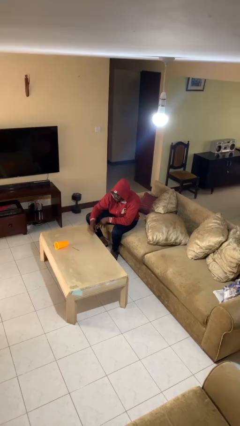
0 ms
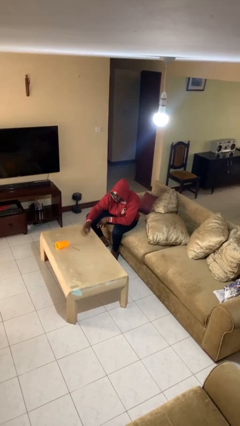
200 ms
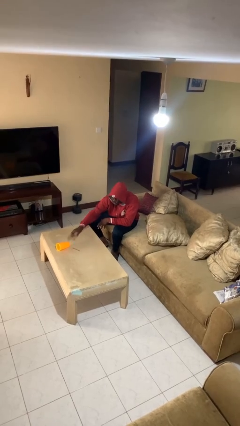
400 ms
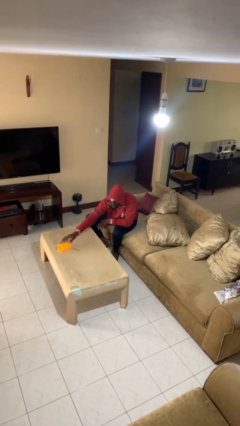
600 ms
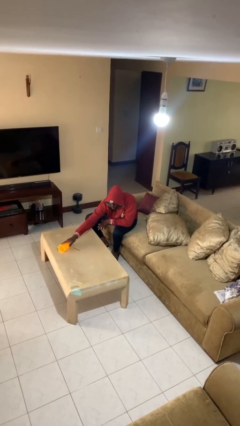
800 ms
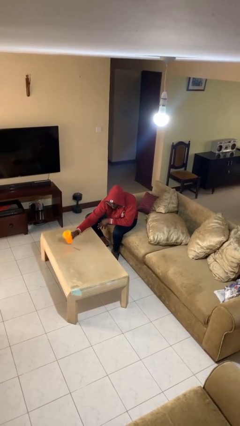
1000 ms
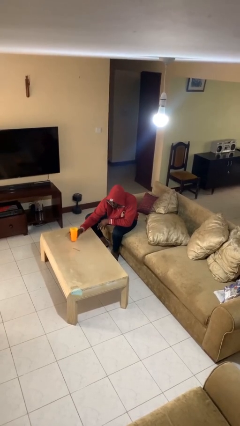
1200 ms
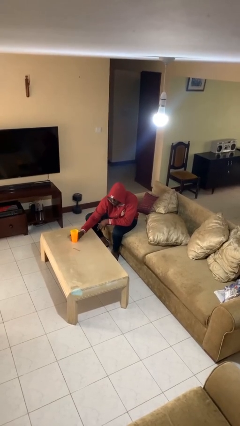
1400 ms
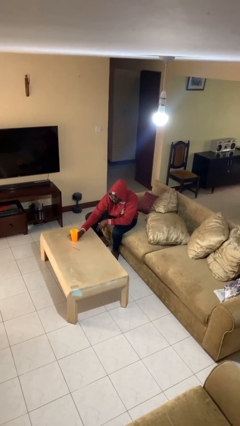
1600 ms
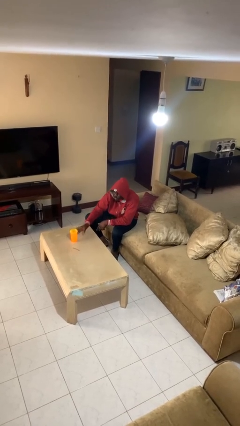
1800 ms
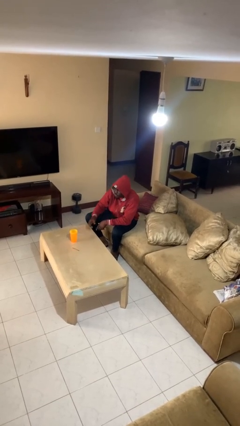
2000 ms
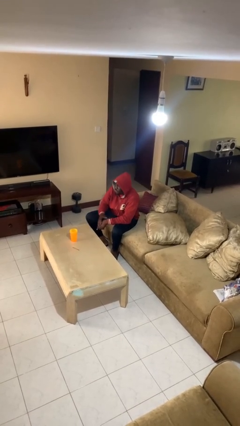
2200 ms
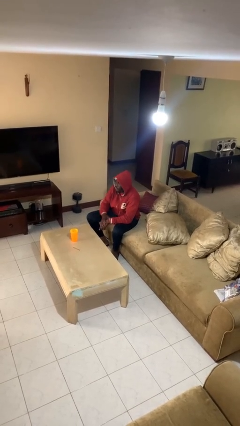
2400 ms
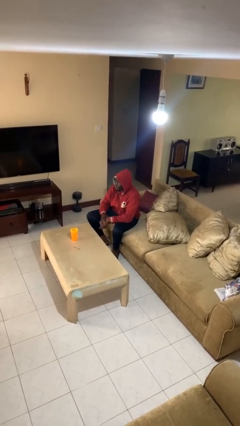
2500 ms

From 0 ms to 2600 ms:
person sets upright glass

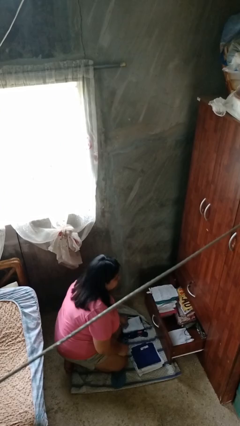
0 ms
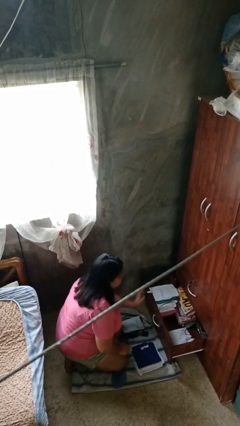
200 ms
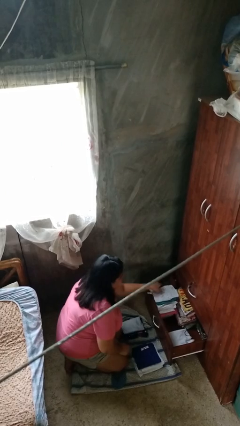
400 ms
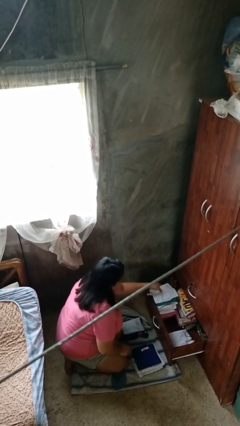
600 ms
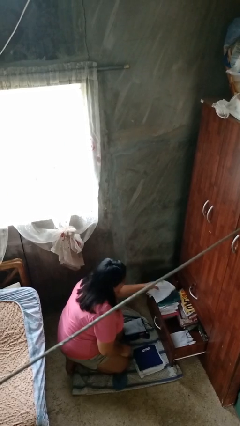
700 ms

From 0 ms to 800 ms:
person takes clothes from dresser

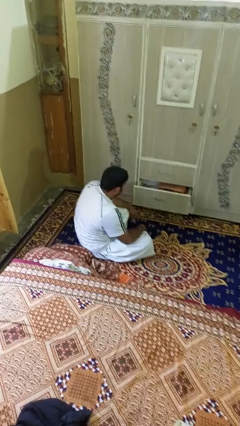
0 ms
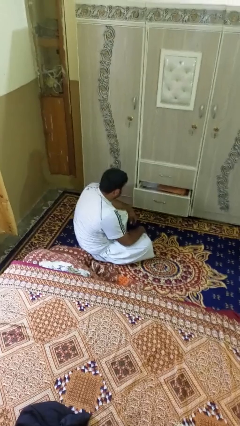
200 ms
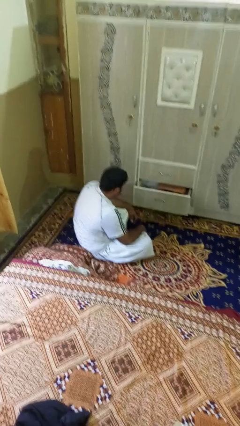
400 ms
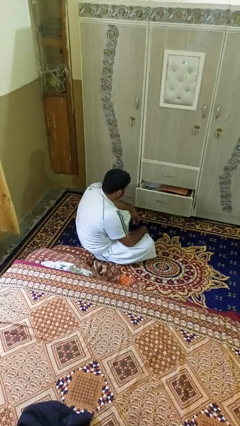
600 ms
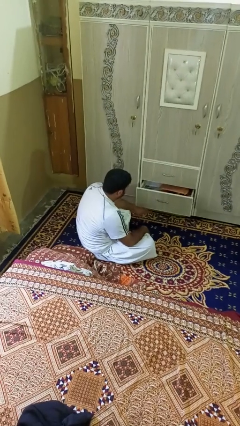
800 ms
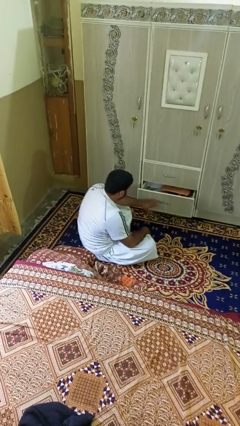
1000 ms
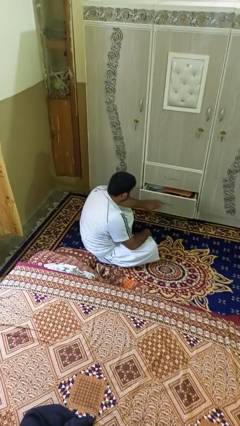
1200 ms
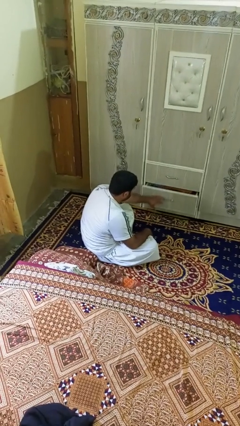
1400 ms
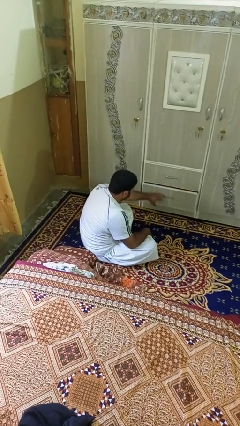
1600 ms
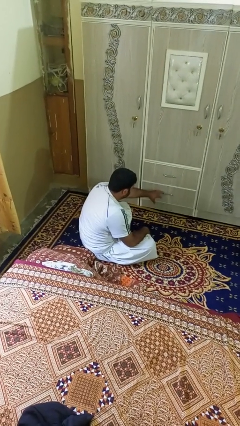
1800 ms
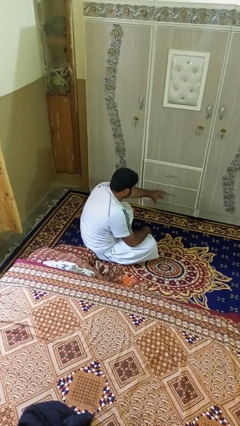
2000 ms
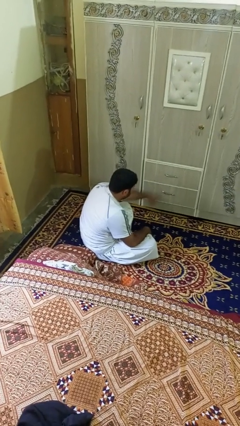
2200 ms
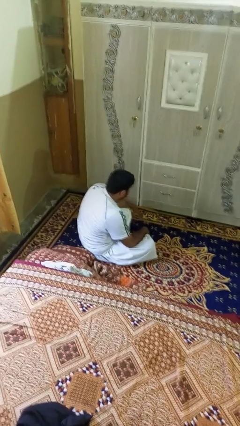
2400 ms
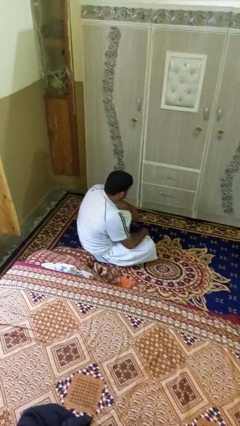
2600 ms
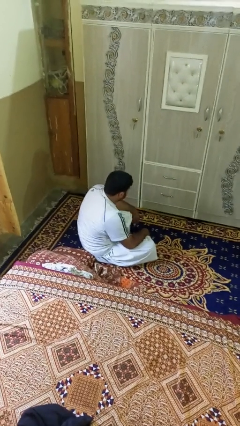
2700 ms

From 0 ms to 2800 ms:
person closes dresser drawer

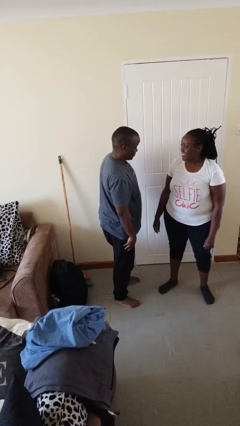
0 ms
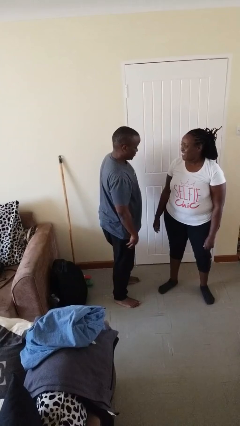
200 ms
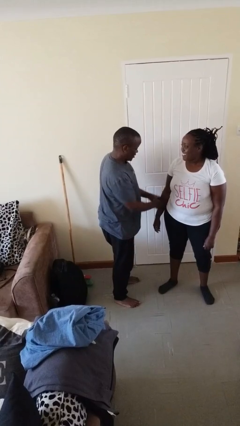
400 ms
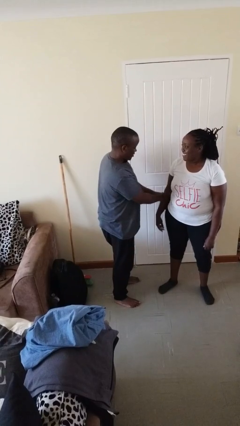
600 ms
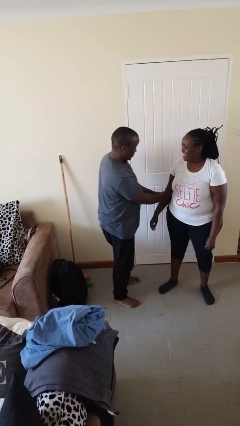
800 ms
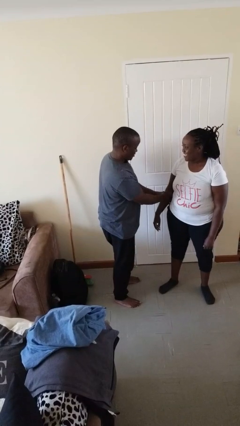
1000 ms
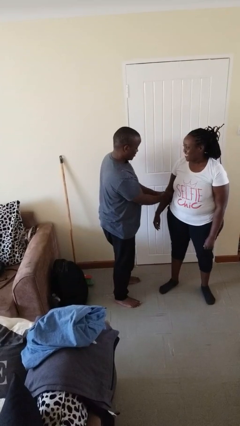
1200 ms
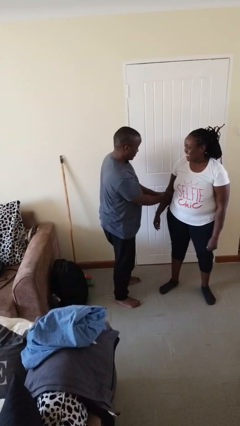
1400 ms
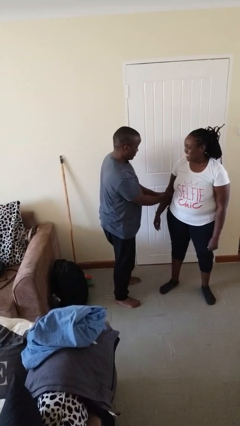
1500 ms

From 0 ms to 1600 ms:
person grabs person by forearm

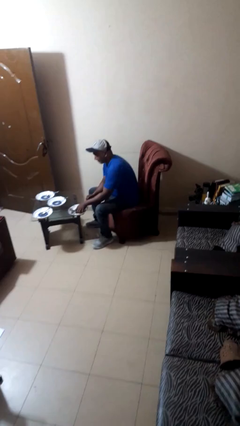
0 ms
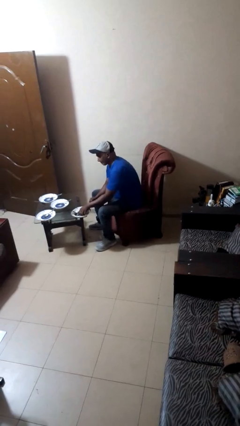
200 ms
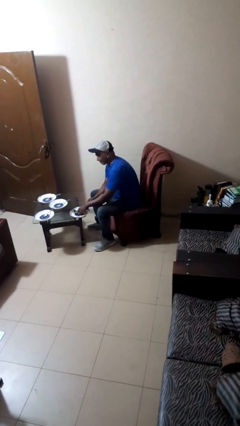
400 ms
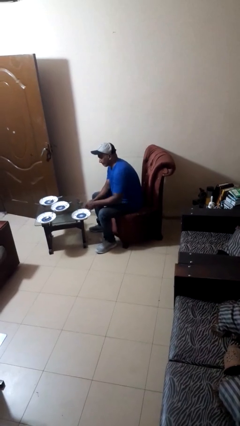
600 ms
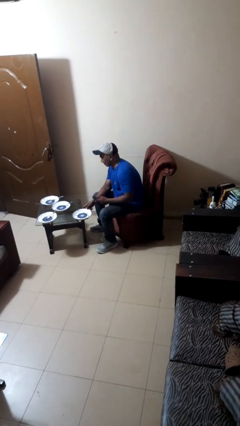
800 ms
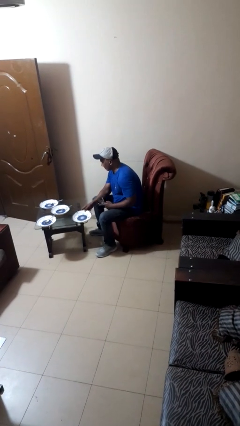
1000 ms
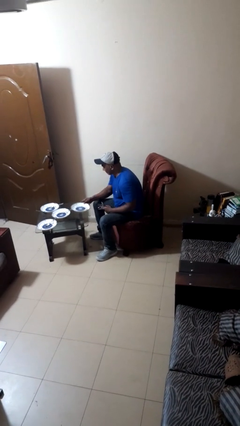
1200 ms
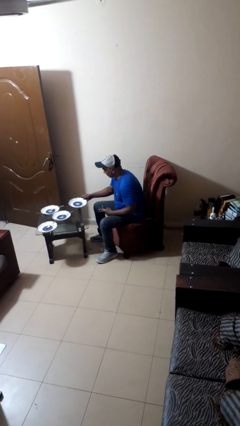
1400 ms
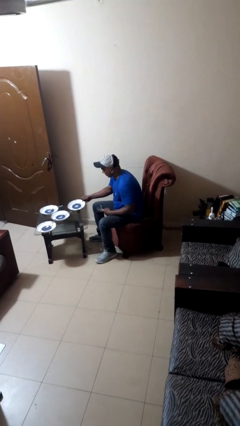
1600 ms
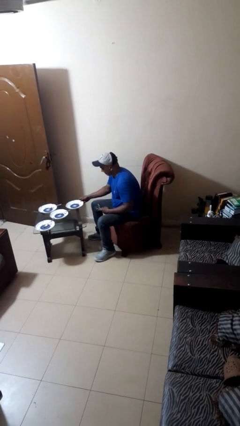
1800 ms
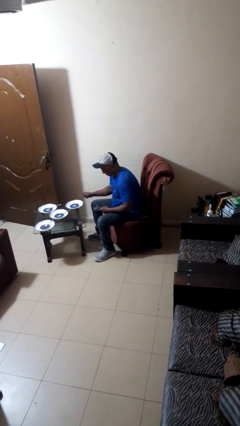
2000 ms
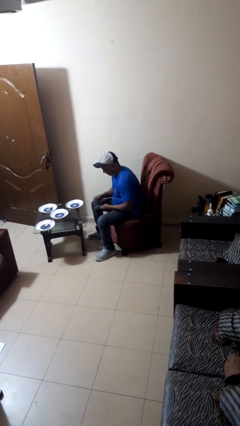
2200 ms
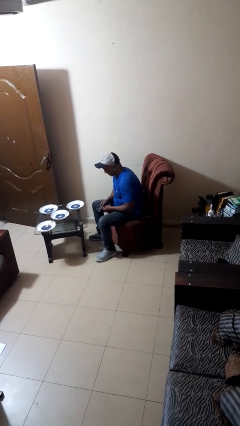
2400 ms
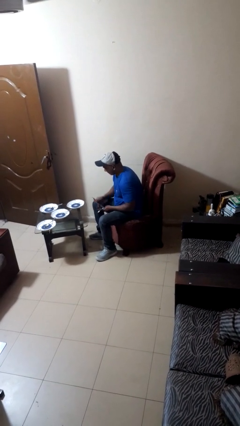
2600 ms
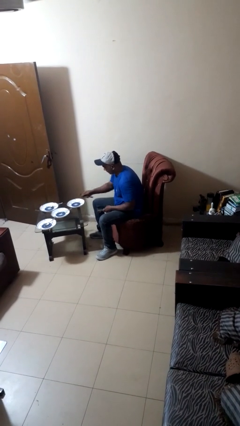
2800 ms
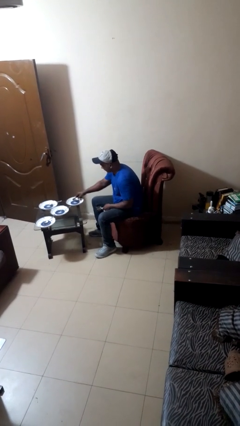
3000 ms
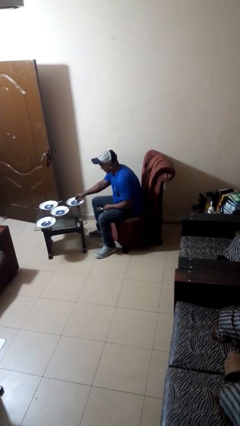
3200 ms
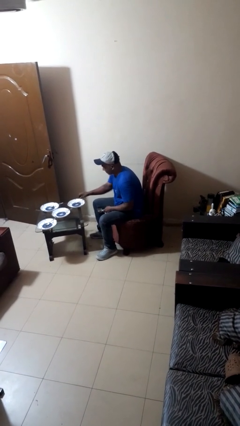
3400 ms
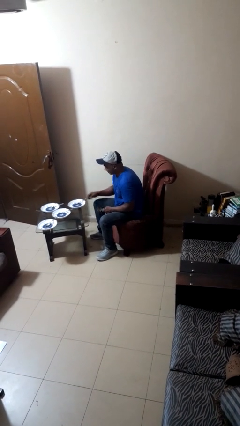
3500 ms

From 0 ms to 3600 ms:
person sets table

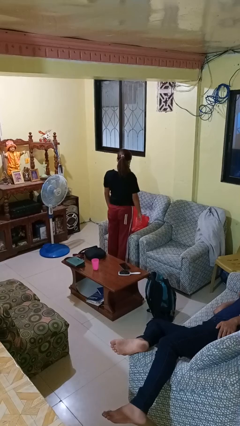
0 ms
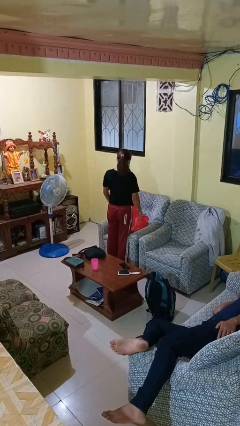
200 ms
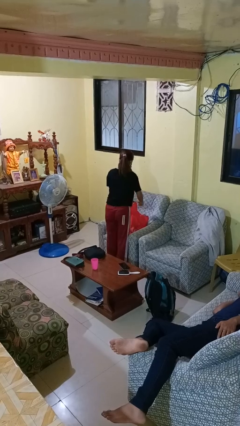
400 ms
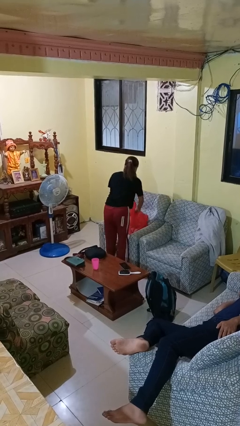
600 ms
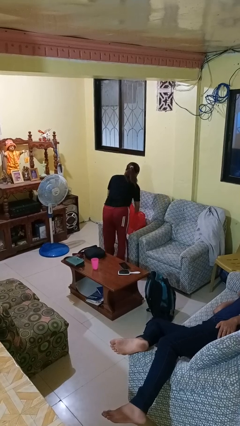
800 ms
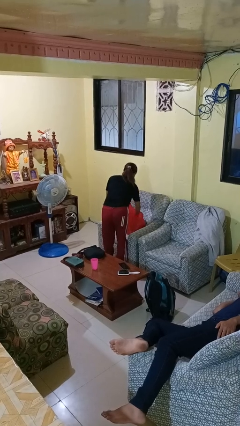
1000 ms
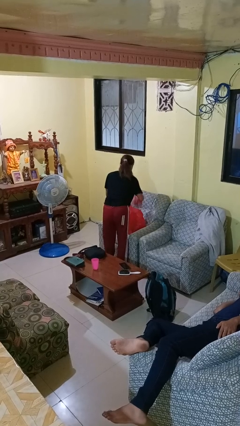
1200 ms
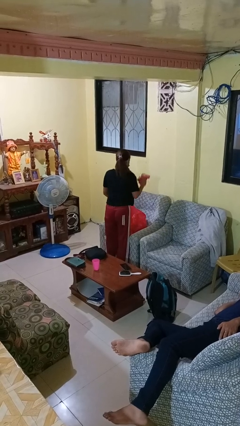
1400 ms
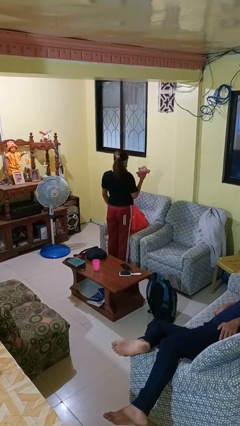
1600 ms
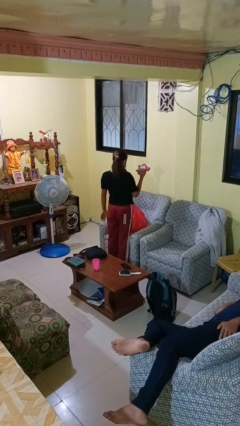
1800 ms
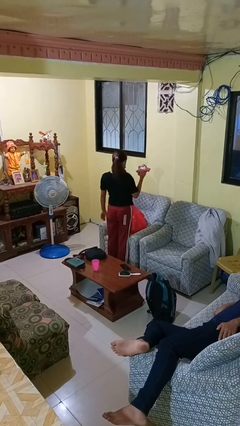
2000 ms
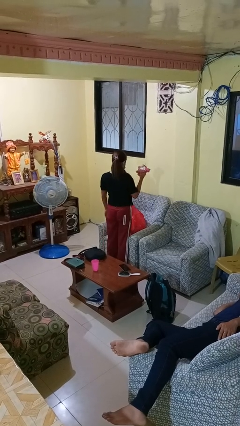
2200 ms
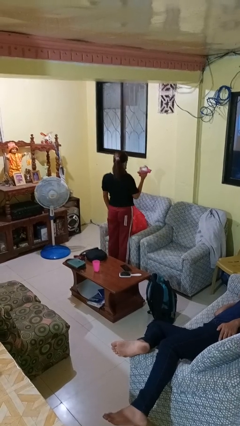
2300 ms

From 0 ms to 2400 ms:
person takes object from bag

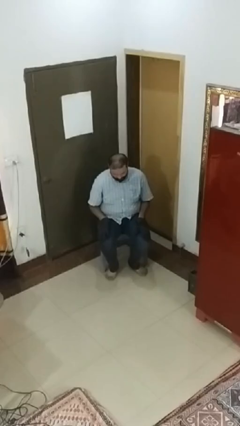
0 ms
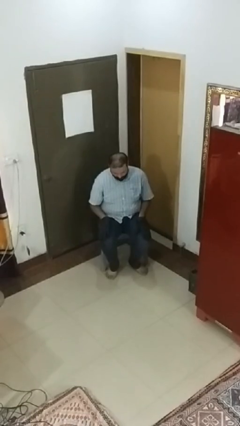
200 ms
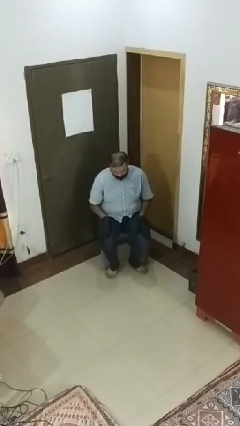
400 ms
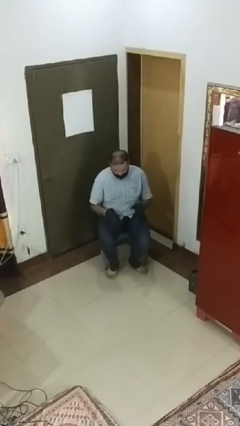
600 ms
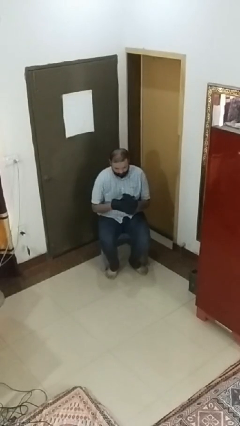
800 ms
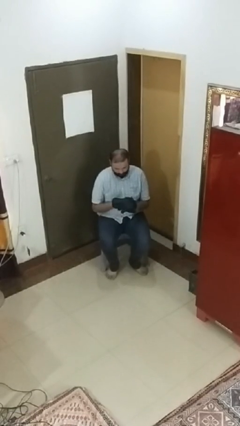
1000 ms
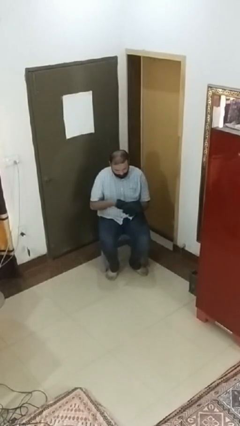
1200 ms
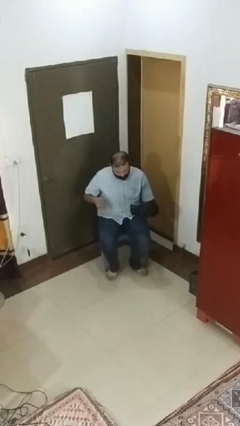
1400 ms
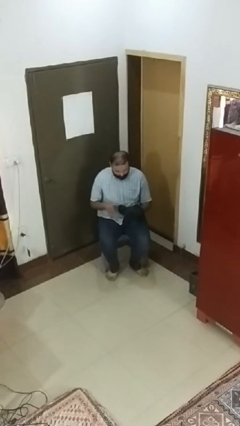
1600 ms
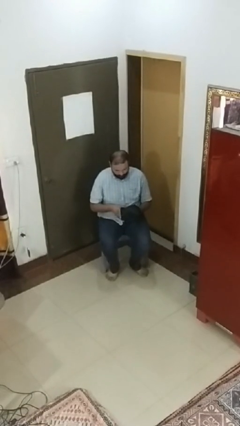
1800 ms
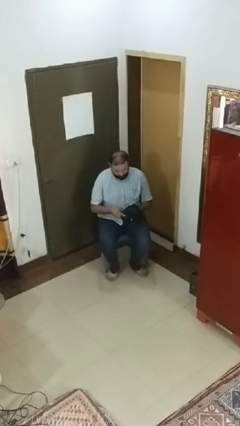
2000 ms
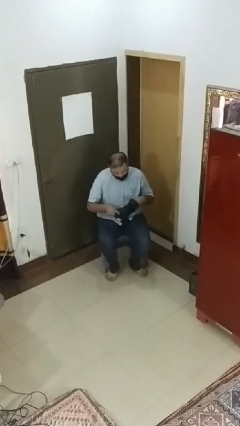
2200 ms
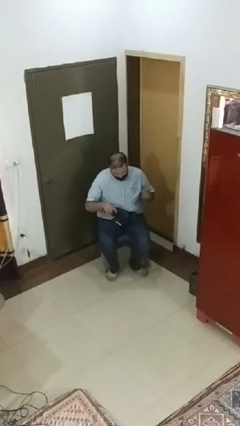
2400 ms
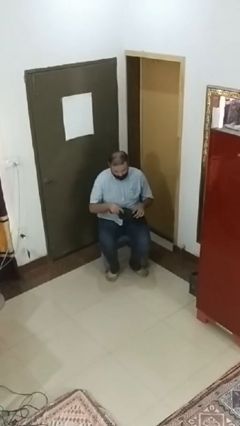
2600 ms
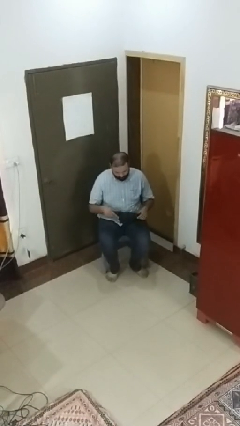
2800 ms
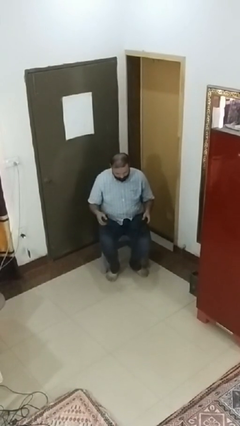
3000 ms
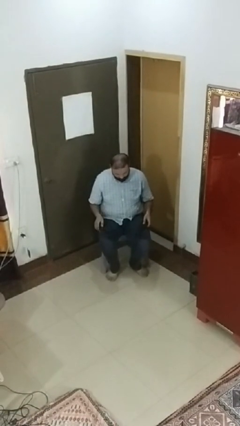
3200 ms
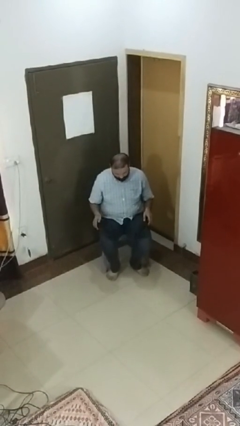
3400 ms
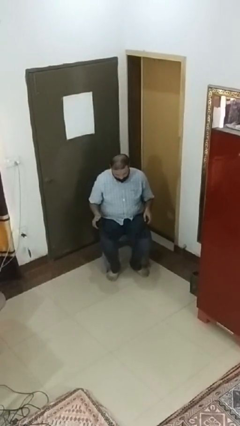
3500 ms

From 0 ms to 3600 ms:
person takes off gloves
